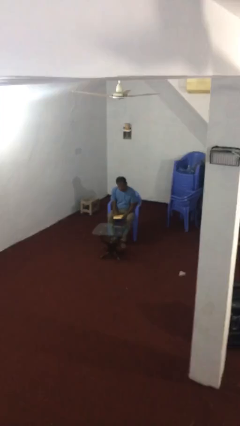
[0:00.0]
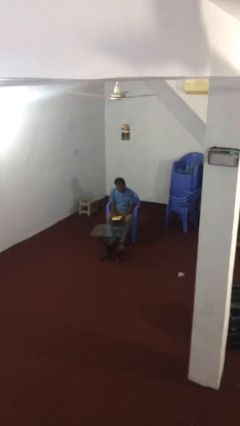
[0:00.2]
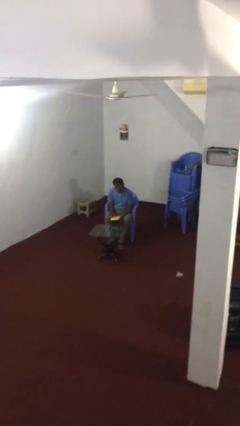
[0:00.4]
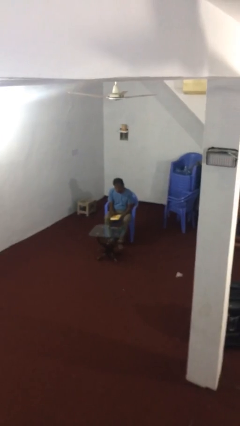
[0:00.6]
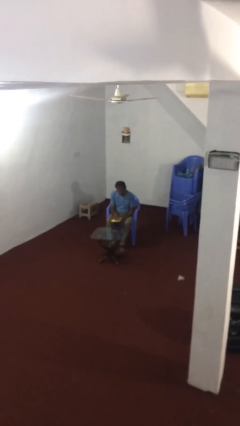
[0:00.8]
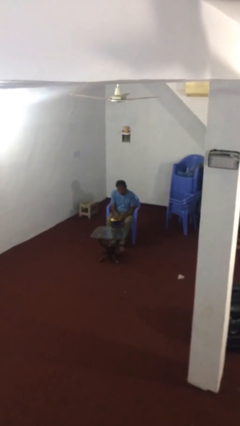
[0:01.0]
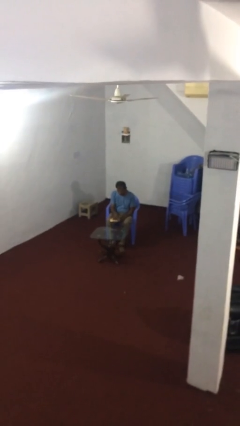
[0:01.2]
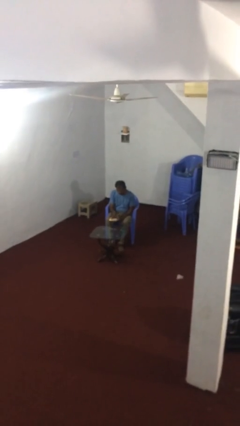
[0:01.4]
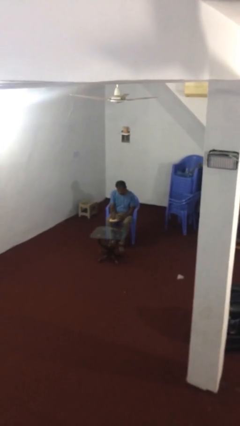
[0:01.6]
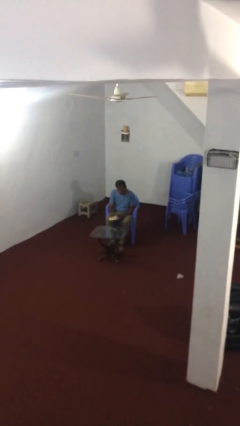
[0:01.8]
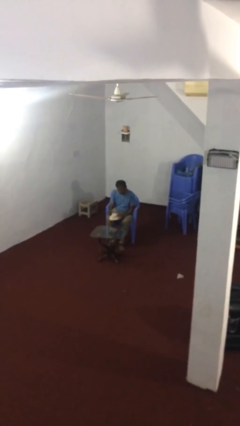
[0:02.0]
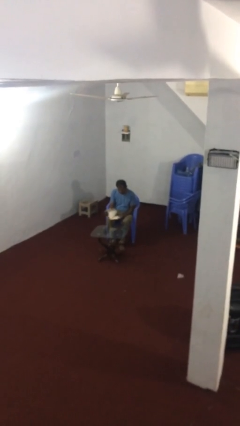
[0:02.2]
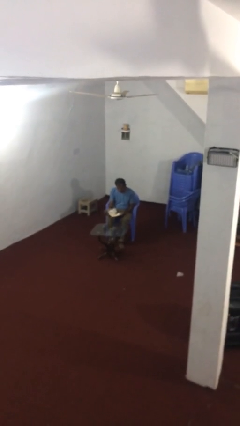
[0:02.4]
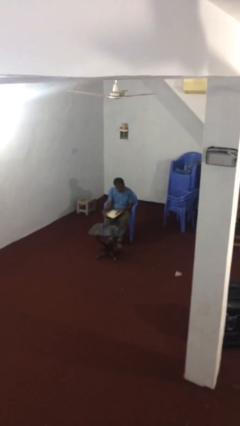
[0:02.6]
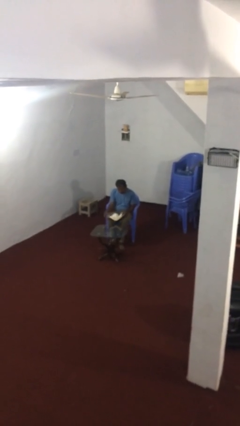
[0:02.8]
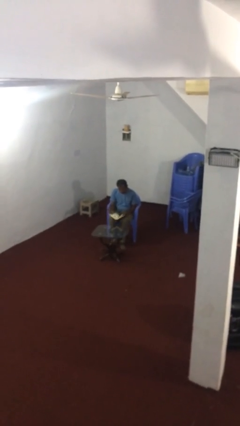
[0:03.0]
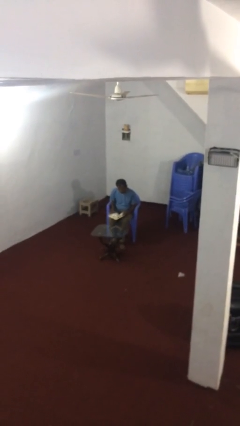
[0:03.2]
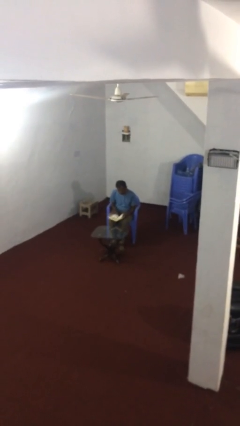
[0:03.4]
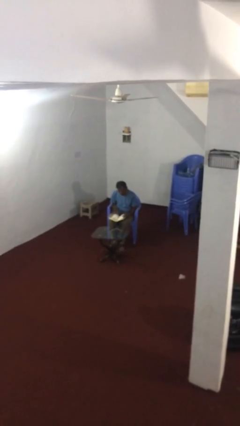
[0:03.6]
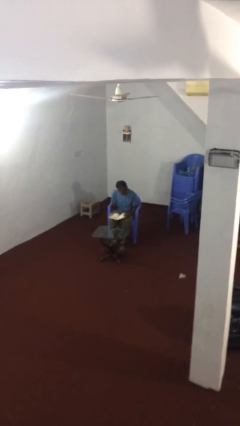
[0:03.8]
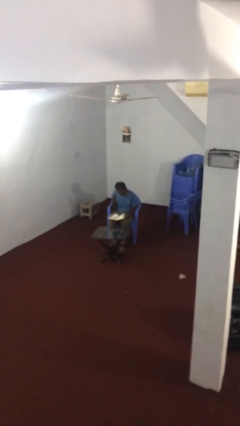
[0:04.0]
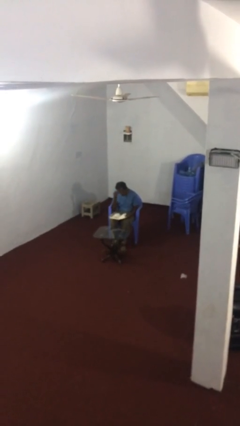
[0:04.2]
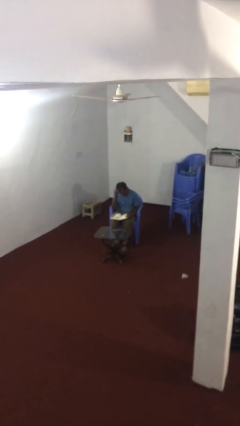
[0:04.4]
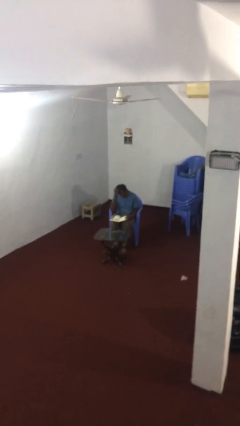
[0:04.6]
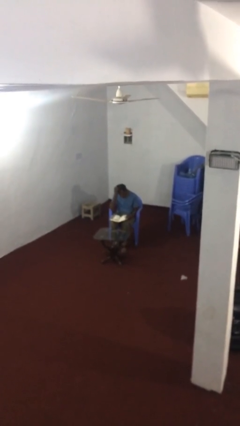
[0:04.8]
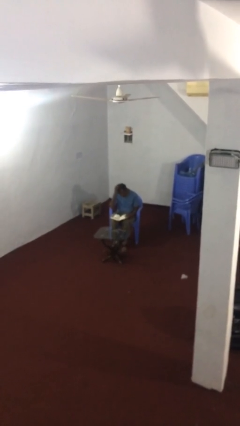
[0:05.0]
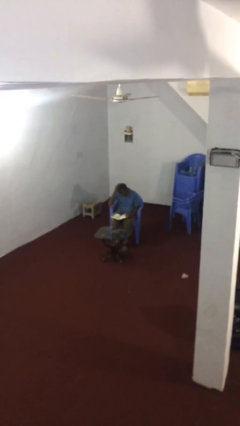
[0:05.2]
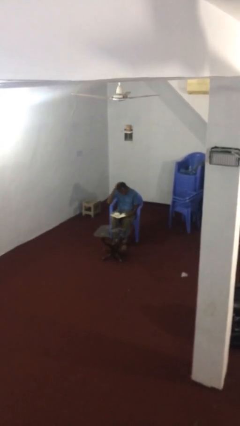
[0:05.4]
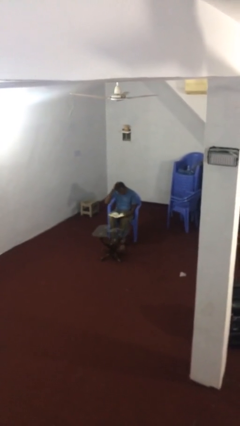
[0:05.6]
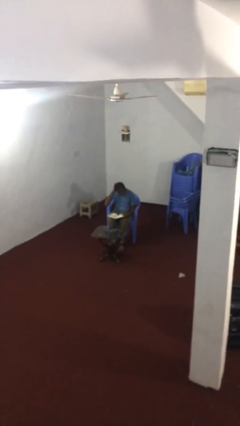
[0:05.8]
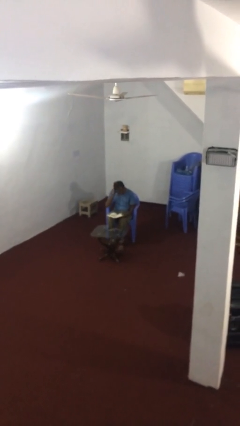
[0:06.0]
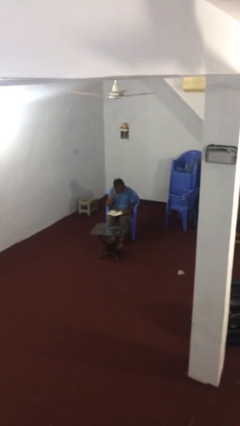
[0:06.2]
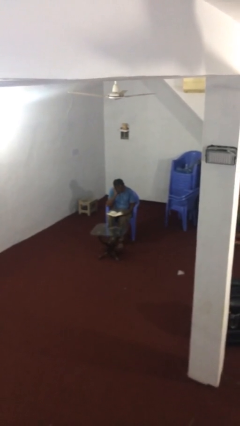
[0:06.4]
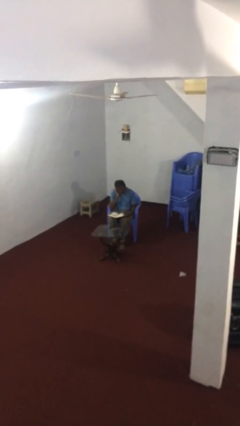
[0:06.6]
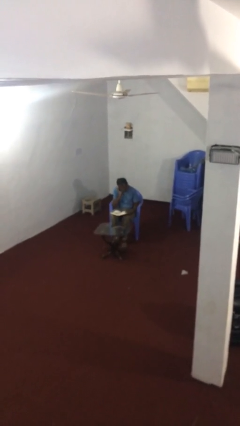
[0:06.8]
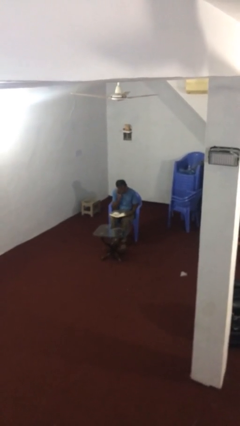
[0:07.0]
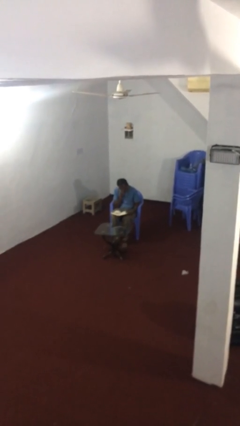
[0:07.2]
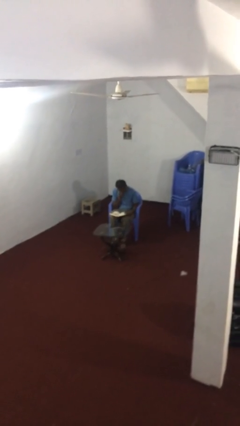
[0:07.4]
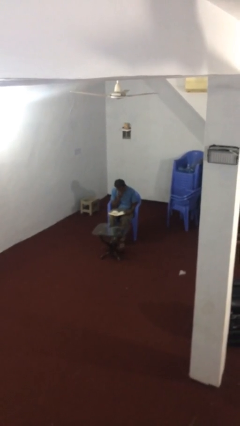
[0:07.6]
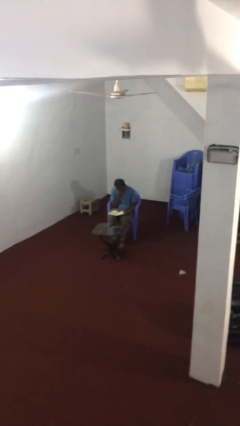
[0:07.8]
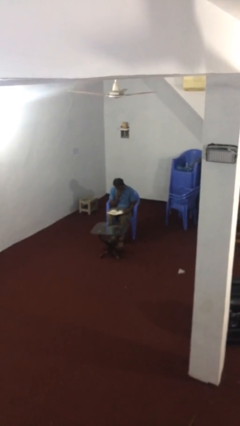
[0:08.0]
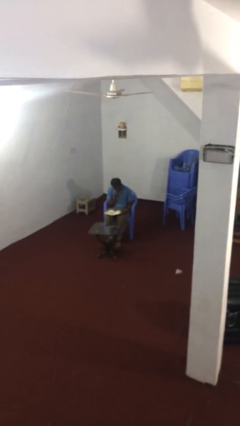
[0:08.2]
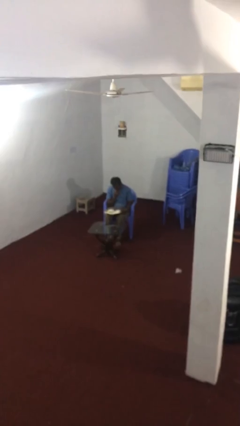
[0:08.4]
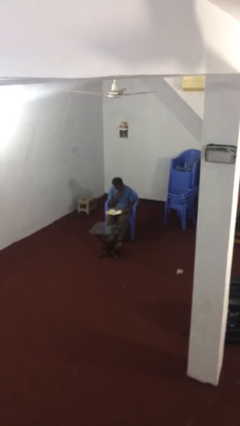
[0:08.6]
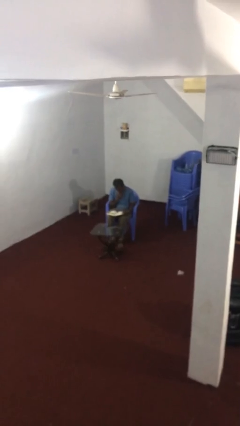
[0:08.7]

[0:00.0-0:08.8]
person reads document

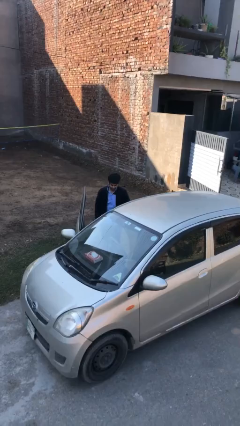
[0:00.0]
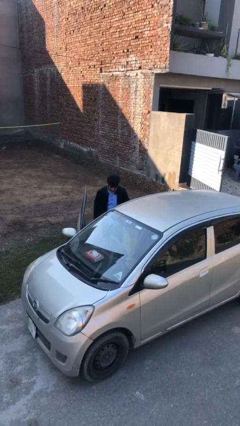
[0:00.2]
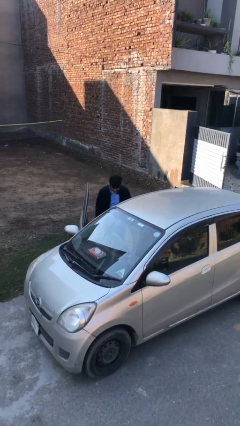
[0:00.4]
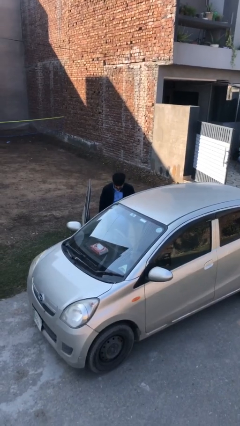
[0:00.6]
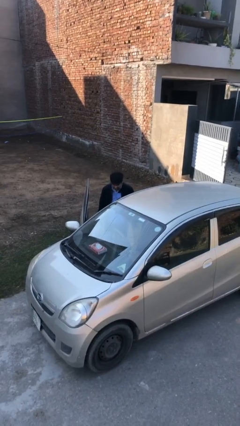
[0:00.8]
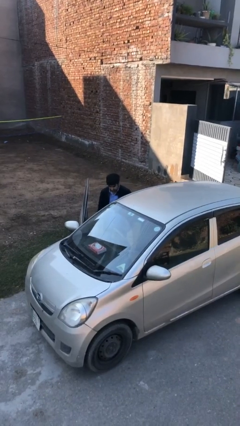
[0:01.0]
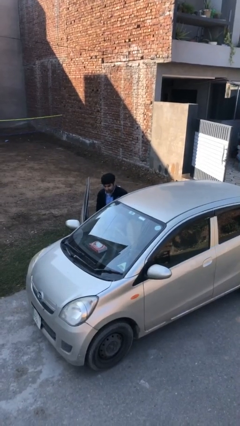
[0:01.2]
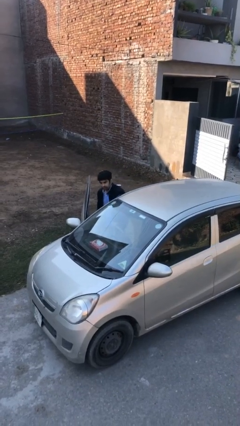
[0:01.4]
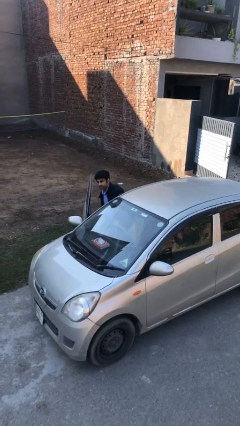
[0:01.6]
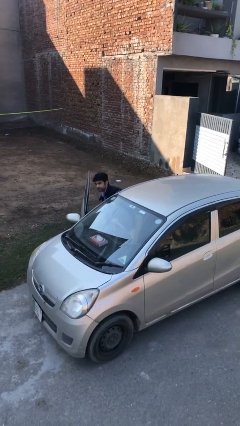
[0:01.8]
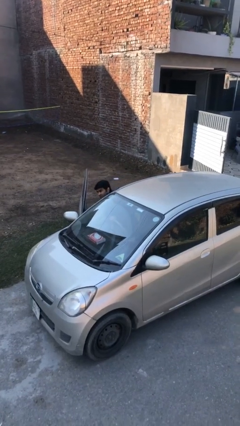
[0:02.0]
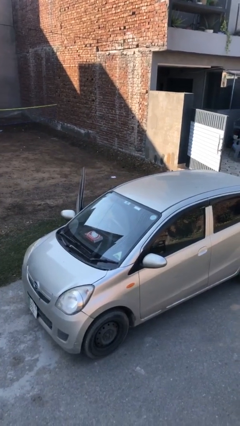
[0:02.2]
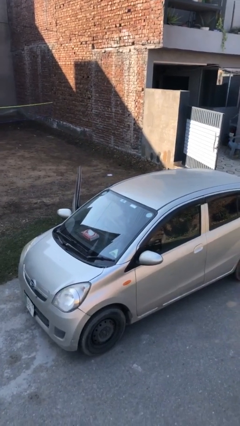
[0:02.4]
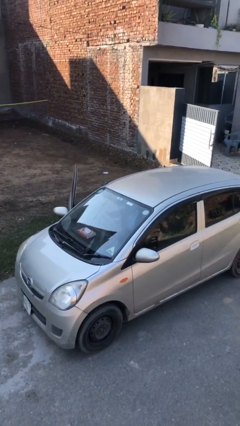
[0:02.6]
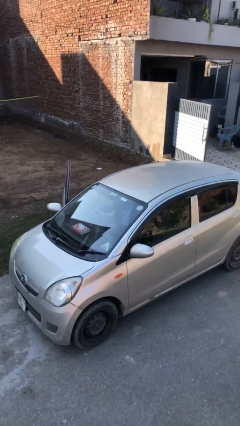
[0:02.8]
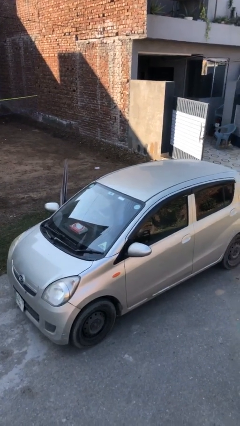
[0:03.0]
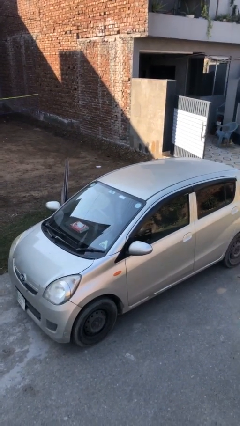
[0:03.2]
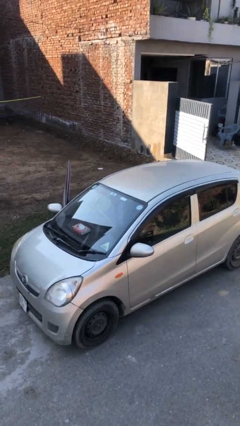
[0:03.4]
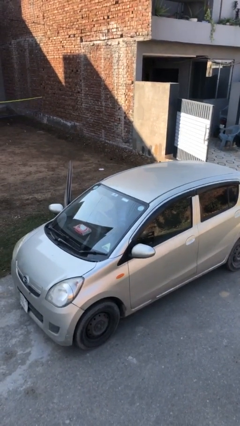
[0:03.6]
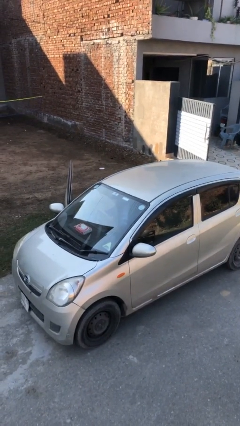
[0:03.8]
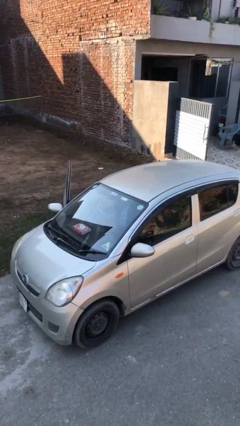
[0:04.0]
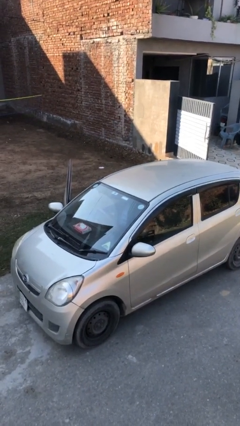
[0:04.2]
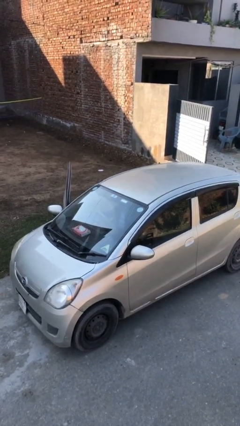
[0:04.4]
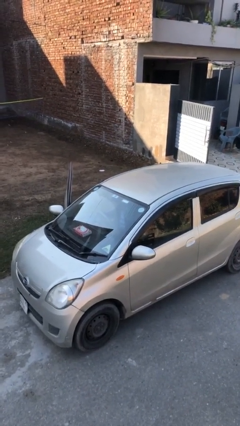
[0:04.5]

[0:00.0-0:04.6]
person enters car

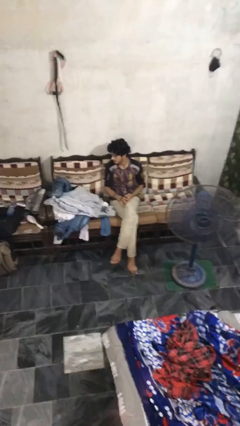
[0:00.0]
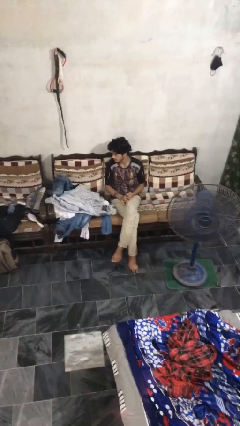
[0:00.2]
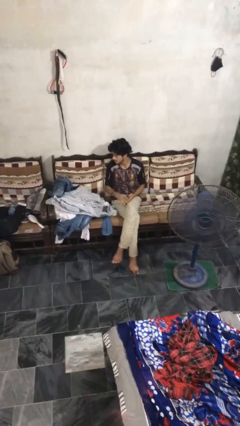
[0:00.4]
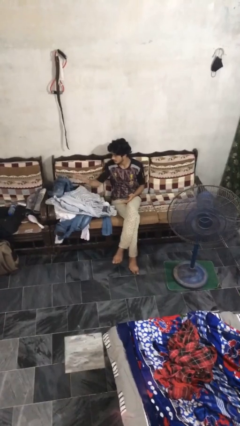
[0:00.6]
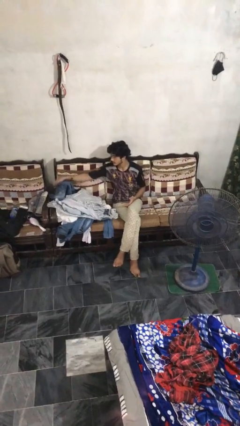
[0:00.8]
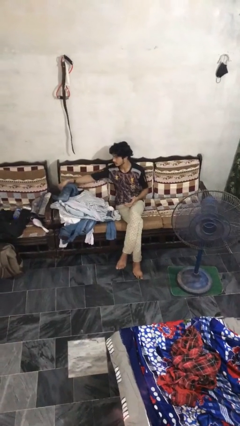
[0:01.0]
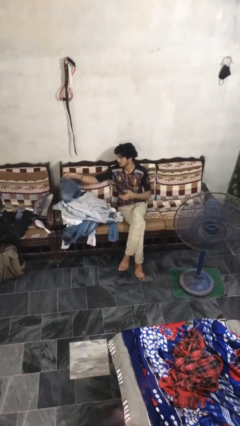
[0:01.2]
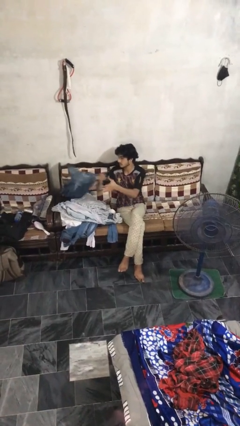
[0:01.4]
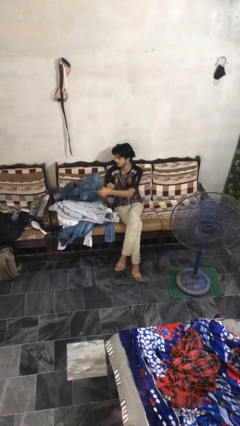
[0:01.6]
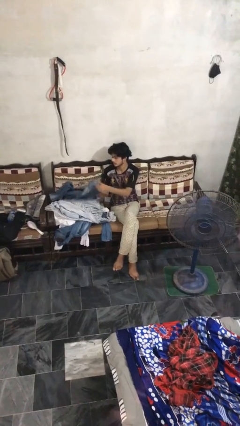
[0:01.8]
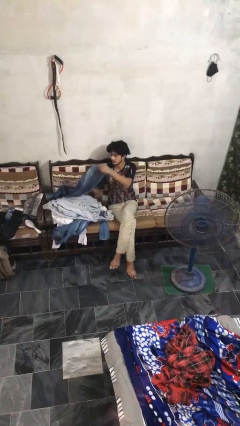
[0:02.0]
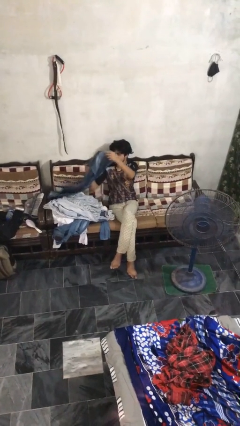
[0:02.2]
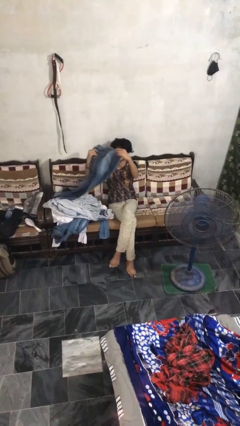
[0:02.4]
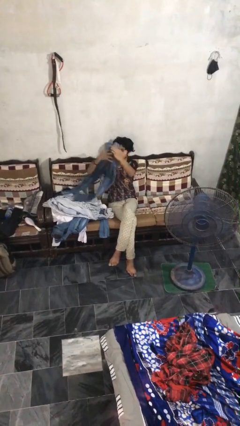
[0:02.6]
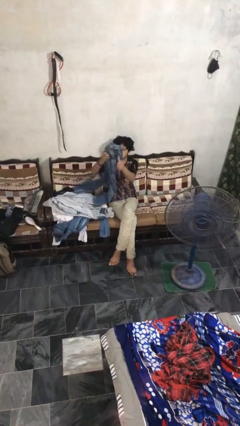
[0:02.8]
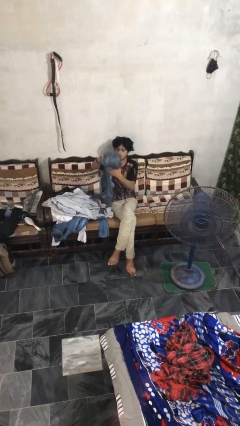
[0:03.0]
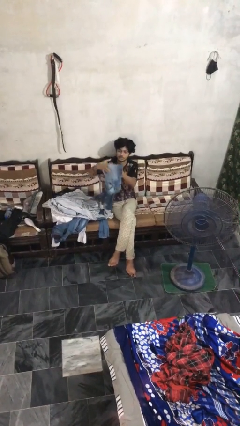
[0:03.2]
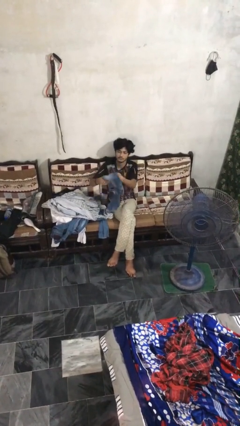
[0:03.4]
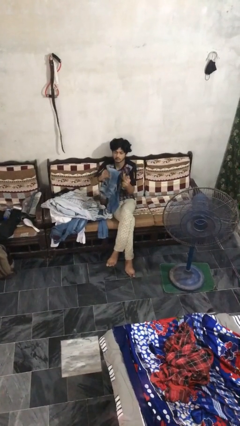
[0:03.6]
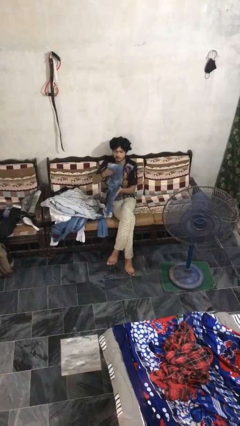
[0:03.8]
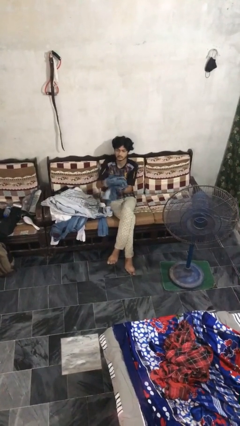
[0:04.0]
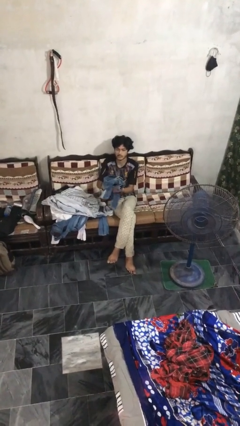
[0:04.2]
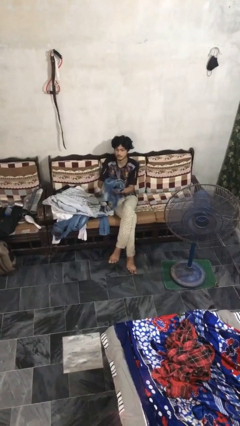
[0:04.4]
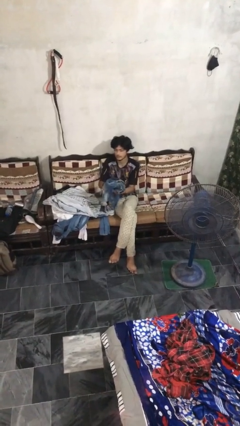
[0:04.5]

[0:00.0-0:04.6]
person folds pants
